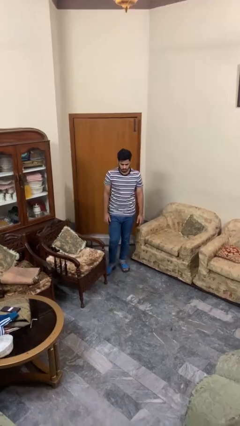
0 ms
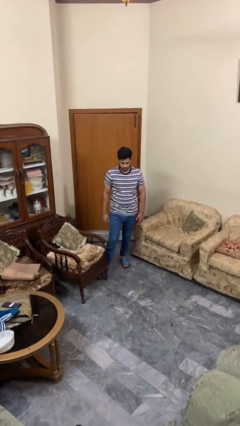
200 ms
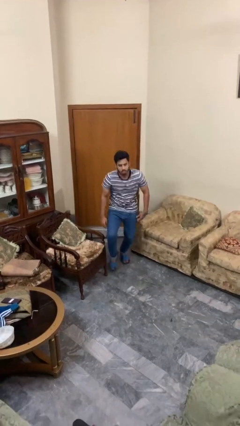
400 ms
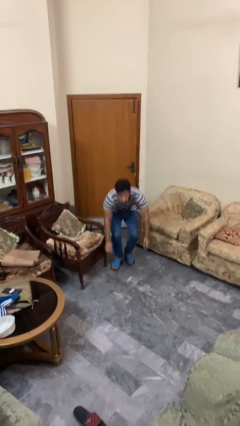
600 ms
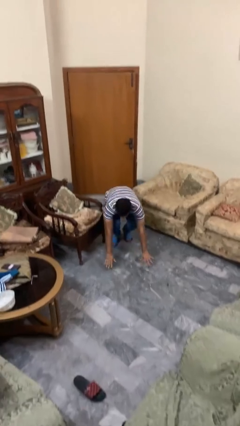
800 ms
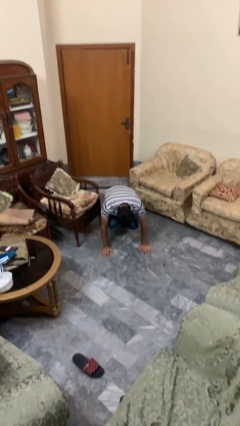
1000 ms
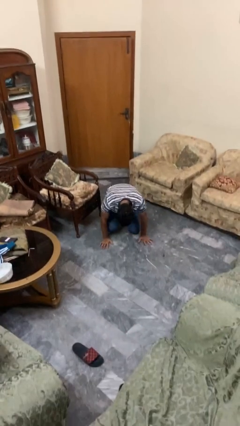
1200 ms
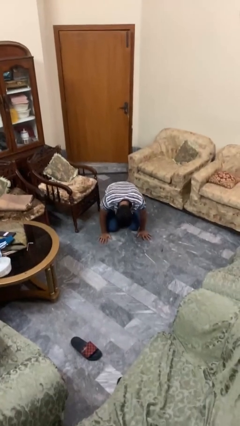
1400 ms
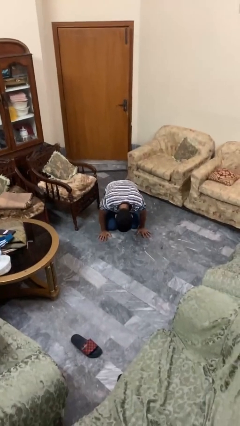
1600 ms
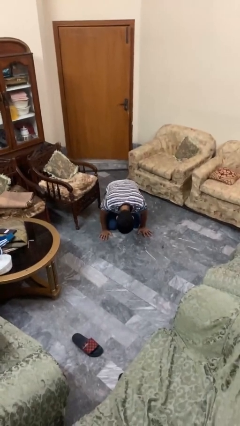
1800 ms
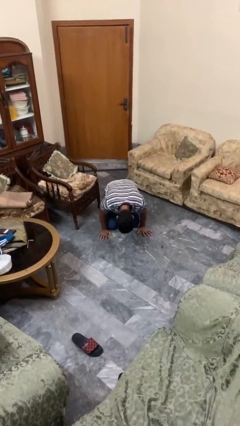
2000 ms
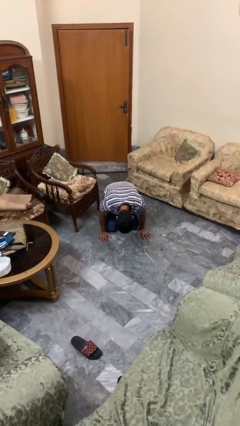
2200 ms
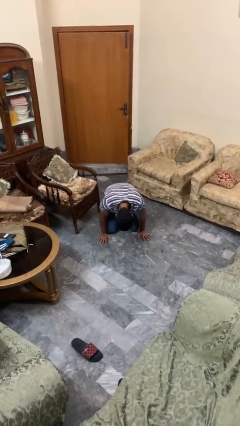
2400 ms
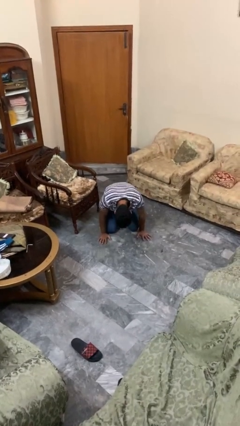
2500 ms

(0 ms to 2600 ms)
person trips on object on floor

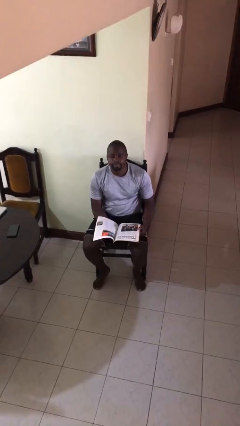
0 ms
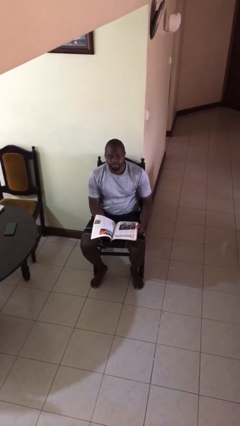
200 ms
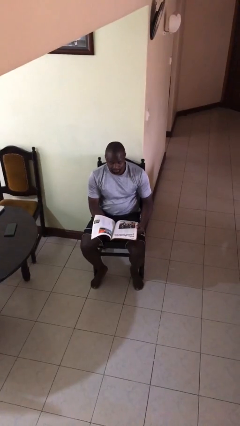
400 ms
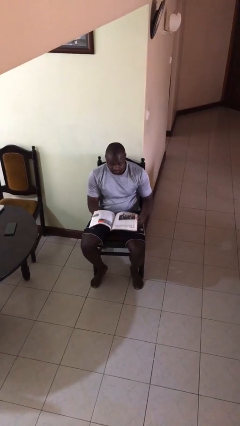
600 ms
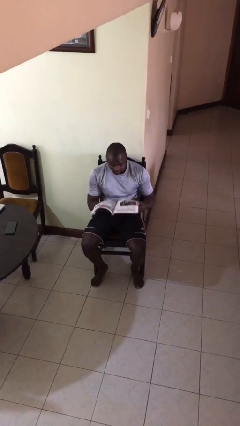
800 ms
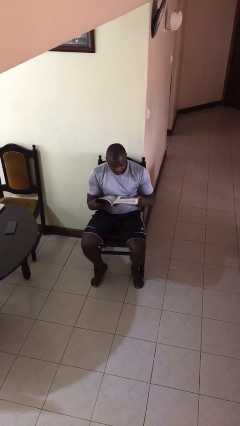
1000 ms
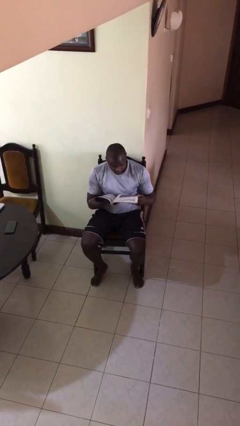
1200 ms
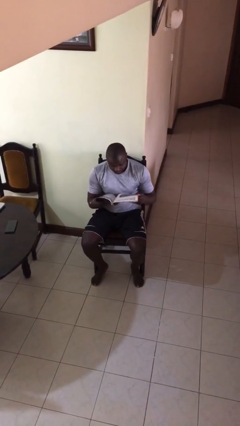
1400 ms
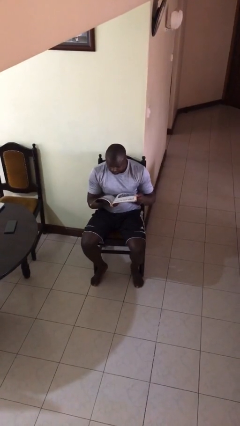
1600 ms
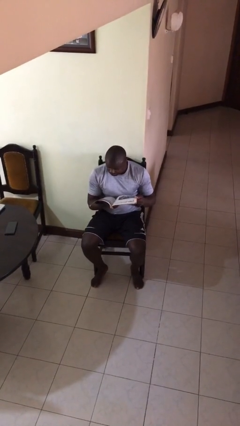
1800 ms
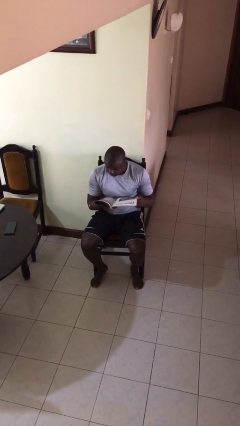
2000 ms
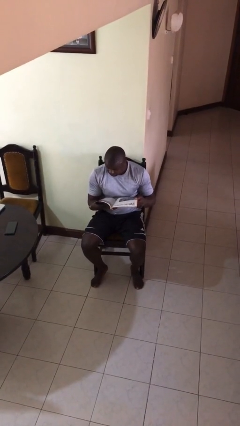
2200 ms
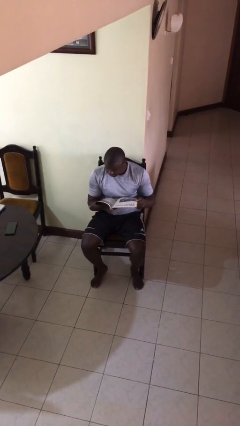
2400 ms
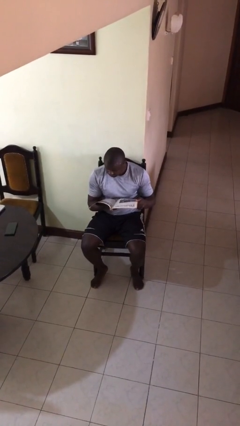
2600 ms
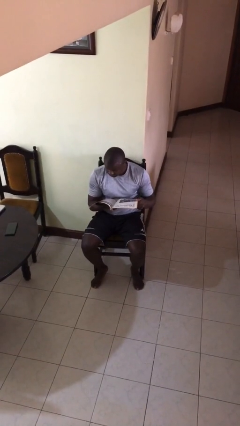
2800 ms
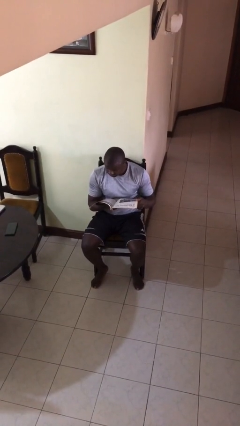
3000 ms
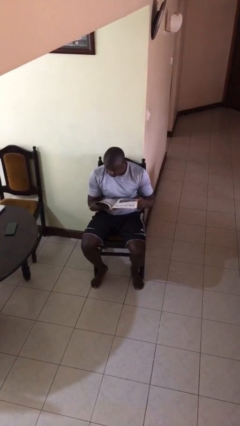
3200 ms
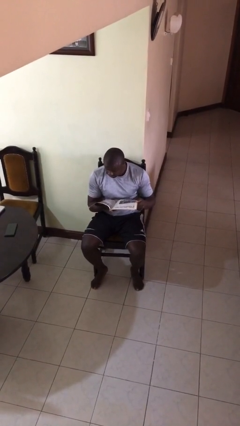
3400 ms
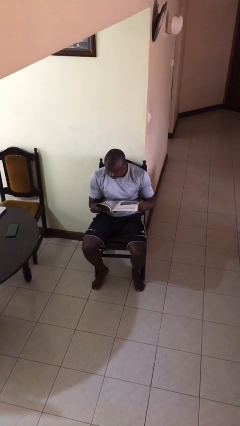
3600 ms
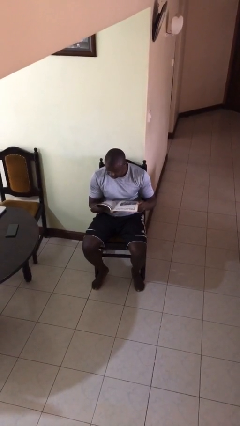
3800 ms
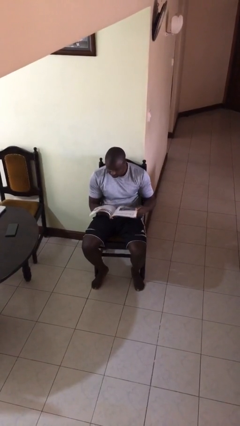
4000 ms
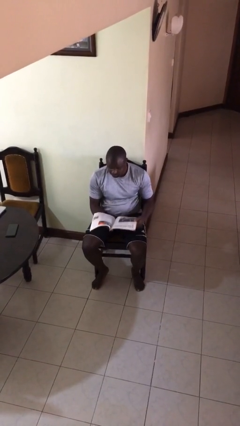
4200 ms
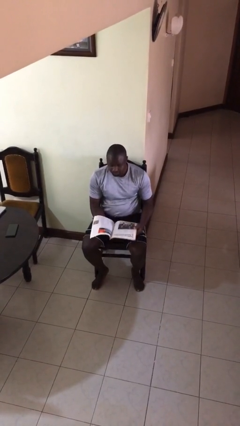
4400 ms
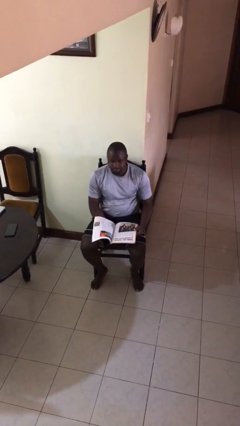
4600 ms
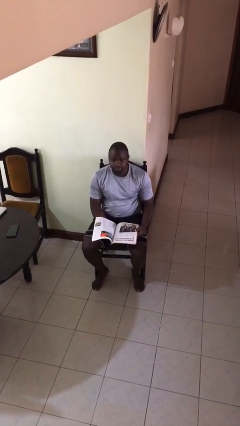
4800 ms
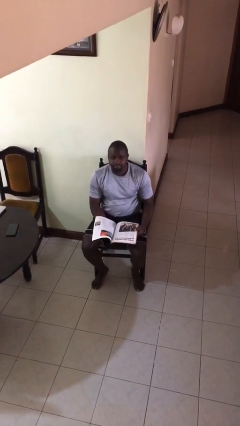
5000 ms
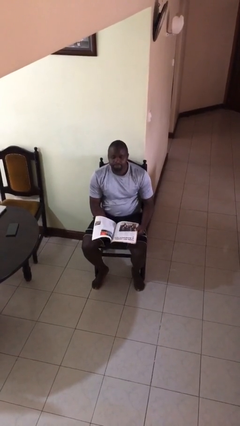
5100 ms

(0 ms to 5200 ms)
person reads document

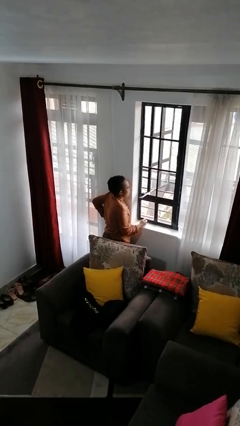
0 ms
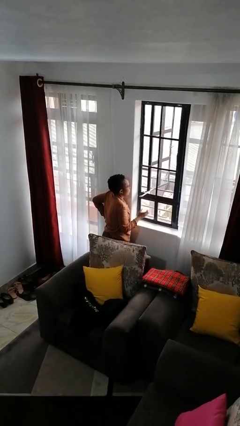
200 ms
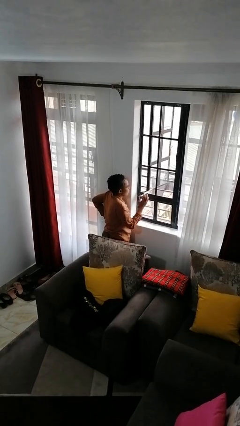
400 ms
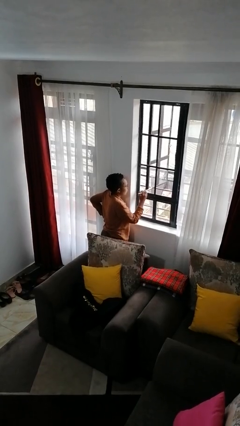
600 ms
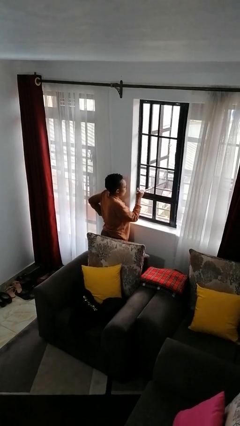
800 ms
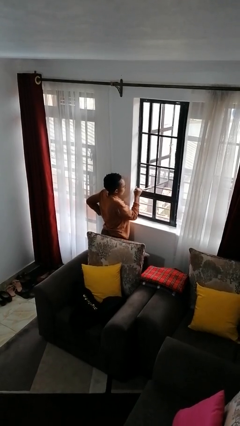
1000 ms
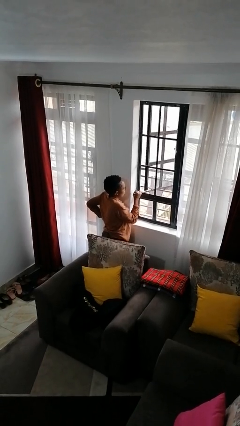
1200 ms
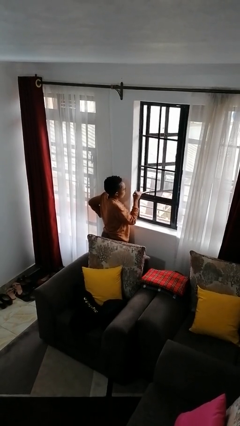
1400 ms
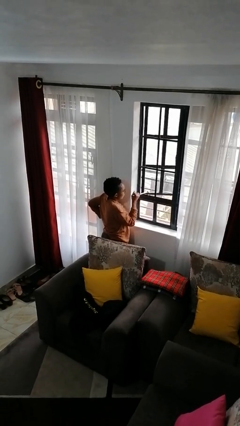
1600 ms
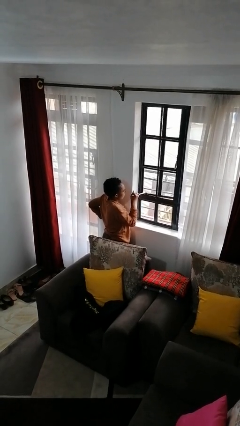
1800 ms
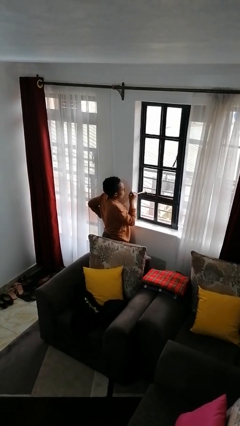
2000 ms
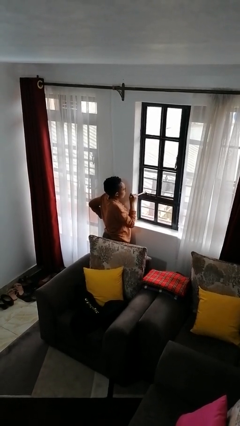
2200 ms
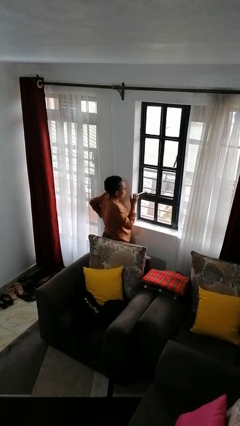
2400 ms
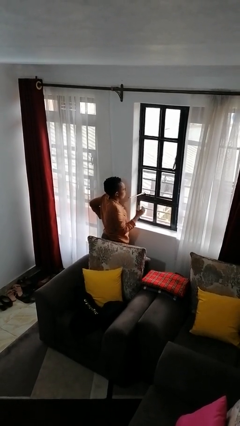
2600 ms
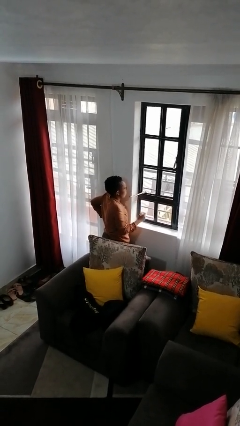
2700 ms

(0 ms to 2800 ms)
person closes home window

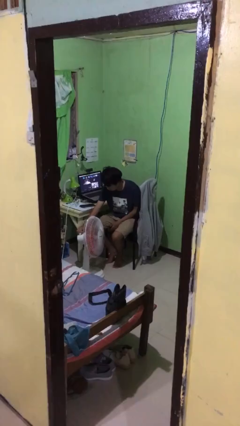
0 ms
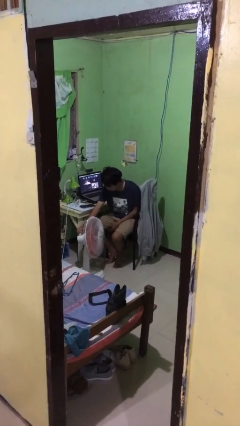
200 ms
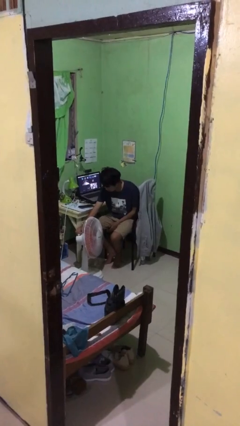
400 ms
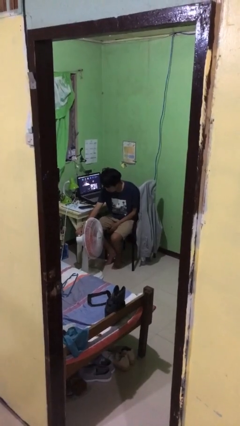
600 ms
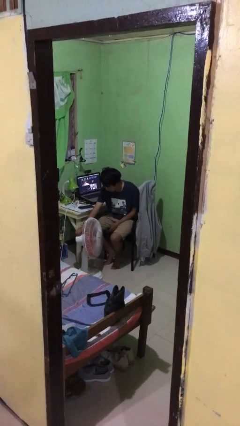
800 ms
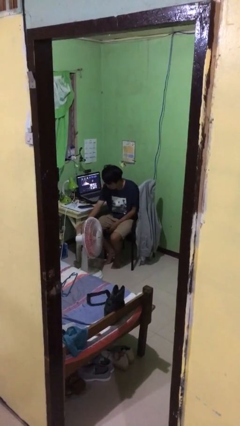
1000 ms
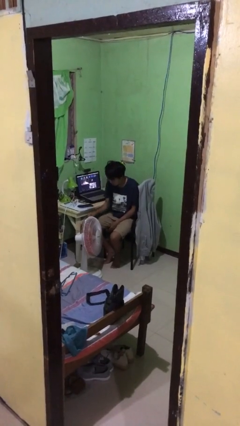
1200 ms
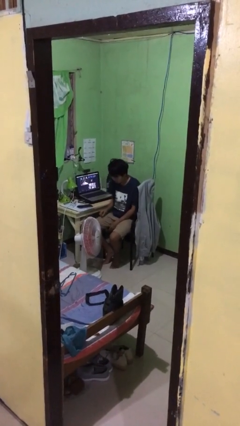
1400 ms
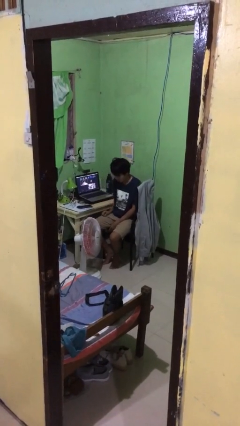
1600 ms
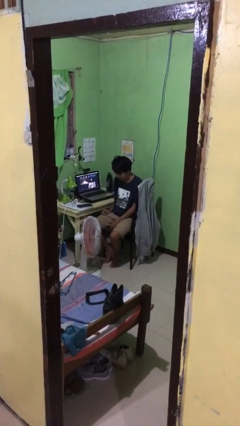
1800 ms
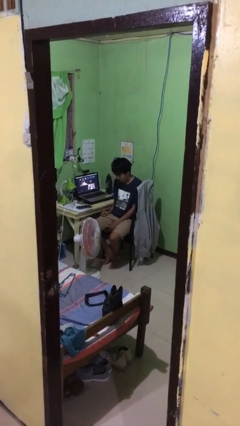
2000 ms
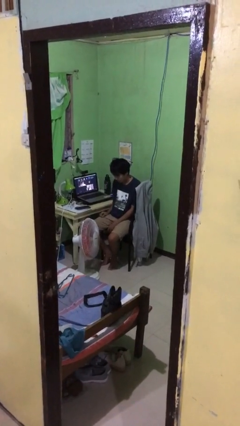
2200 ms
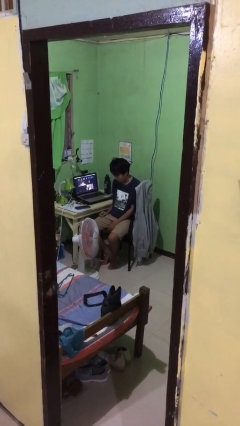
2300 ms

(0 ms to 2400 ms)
person turns off fan

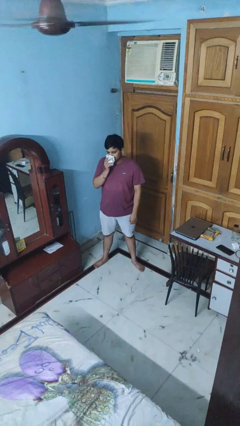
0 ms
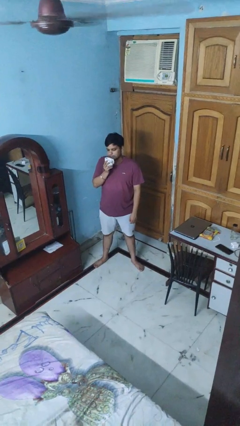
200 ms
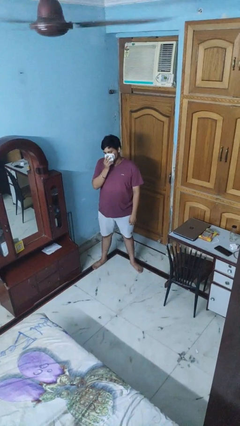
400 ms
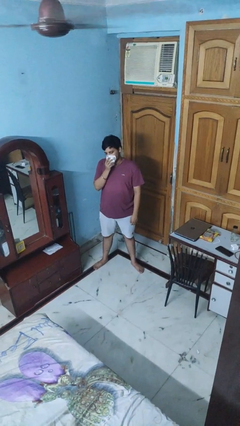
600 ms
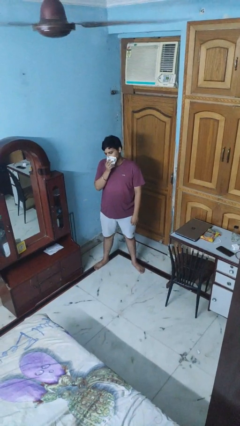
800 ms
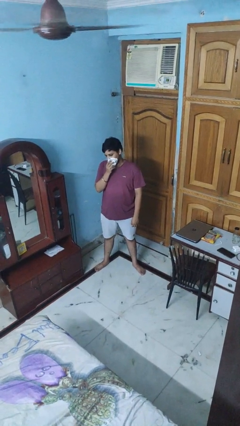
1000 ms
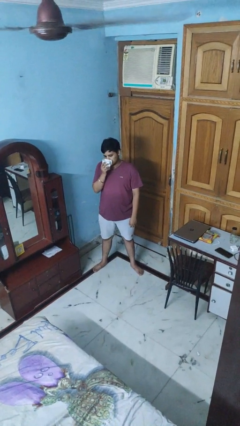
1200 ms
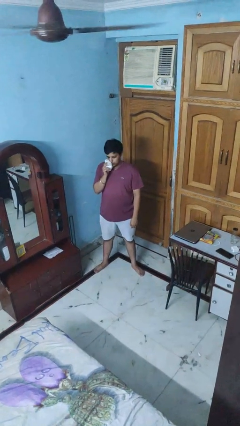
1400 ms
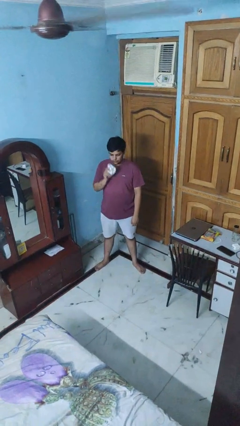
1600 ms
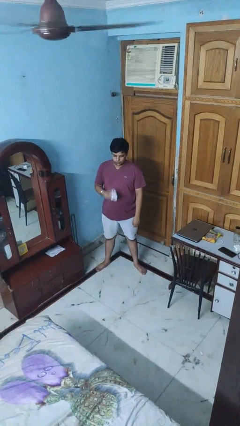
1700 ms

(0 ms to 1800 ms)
person wipes mouth with napkin

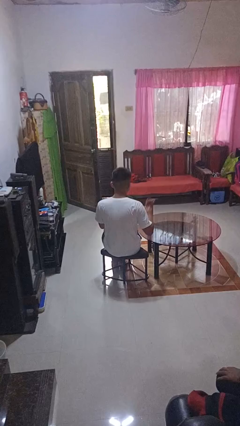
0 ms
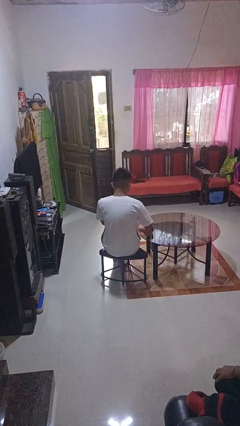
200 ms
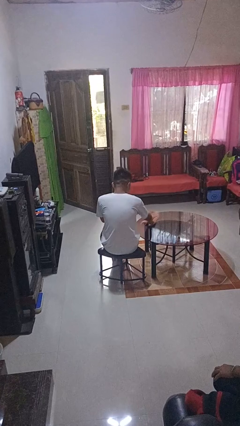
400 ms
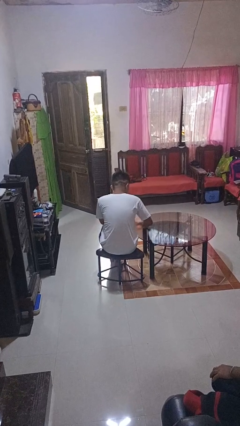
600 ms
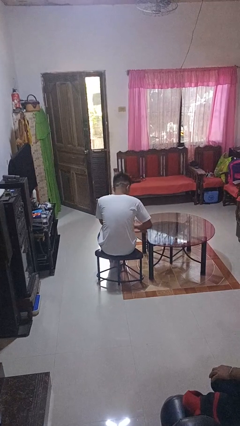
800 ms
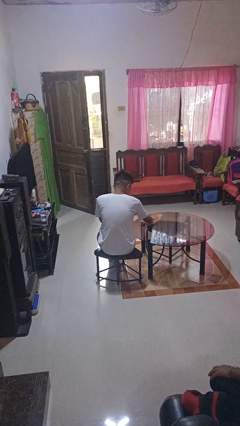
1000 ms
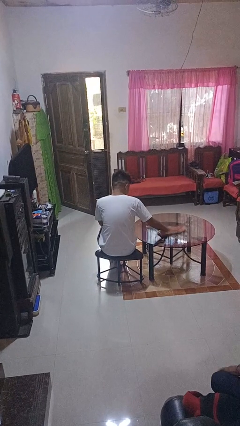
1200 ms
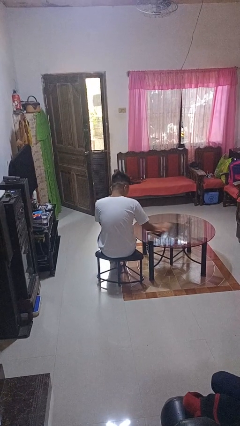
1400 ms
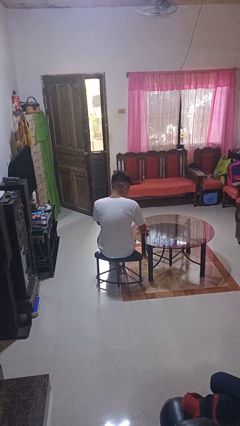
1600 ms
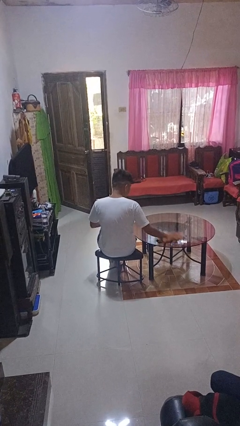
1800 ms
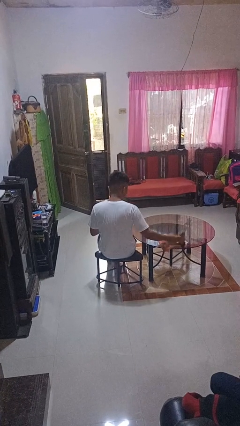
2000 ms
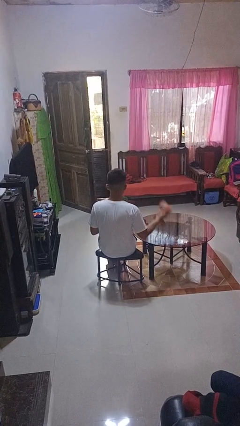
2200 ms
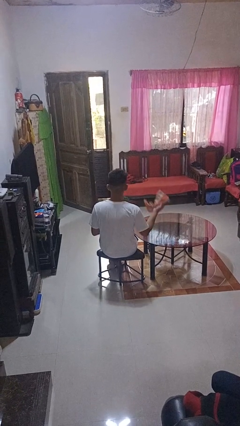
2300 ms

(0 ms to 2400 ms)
person cleans table with rag

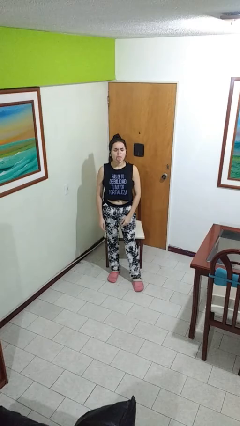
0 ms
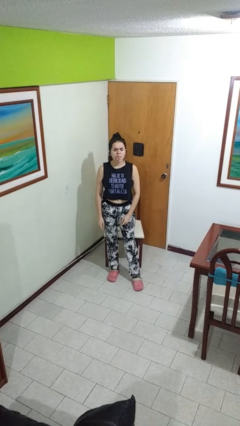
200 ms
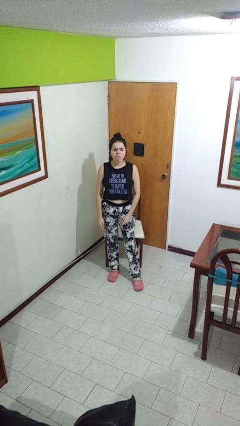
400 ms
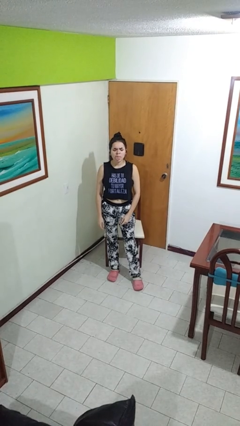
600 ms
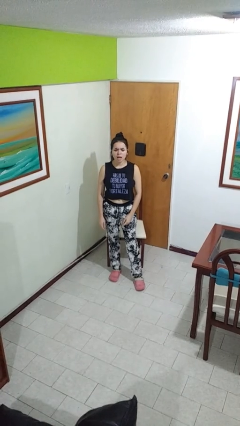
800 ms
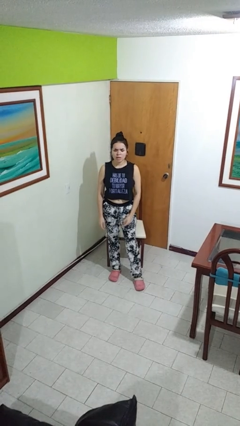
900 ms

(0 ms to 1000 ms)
person sticks out tongue
